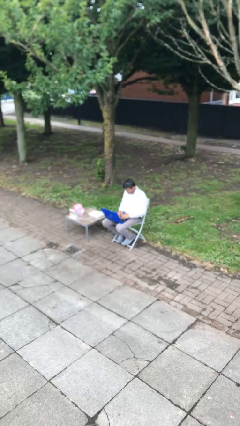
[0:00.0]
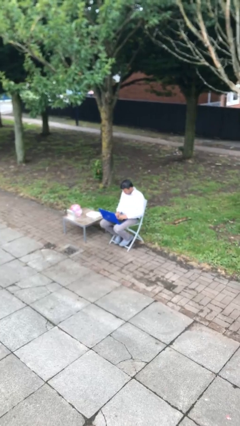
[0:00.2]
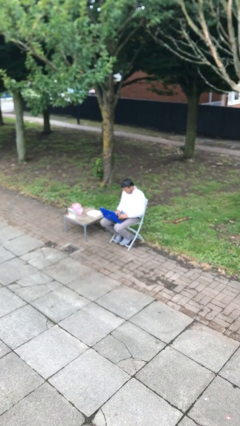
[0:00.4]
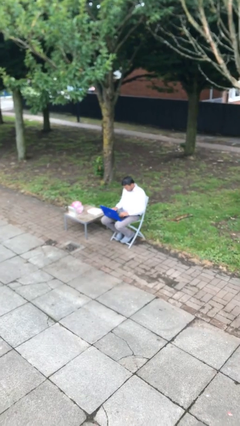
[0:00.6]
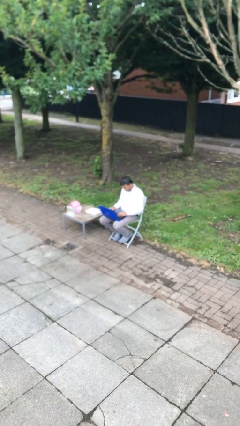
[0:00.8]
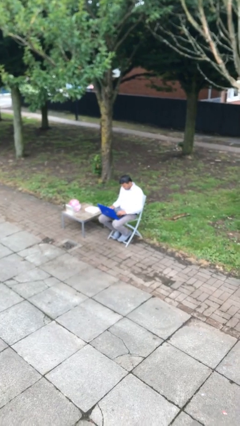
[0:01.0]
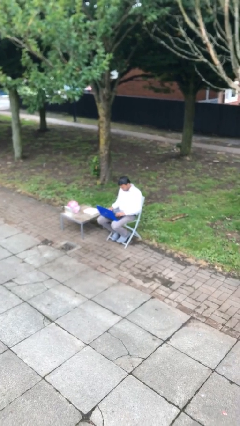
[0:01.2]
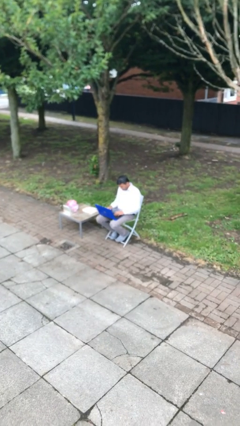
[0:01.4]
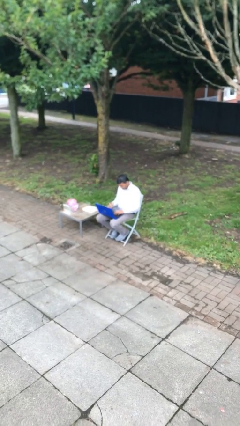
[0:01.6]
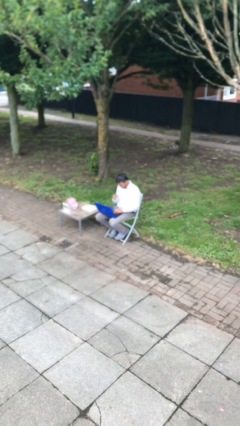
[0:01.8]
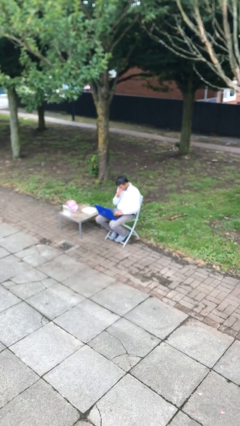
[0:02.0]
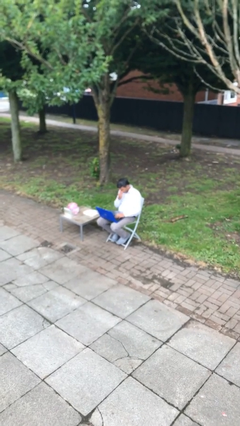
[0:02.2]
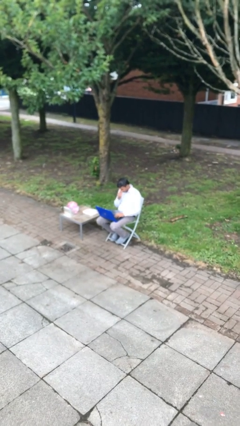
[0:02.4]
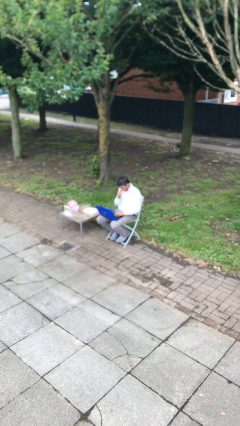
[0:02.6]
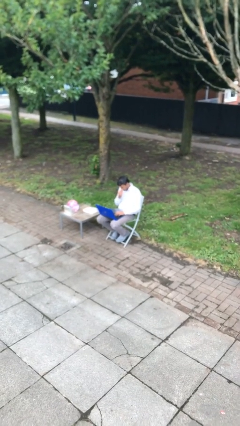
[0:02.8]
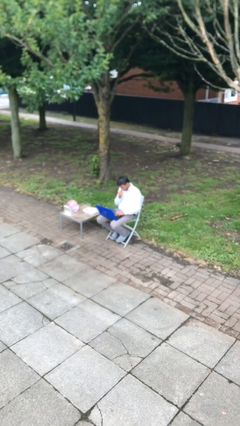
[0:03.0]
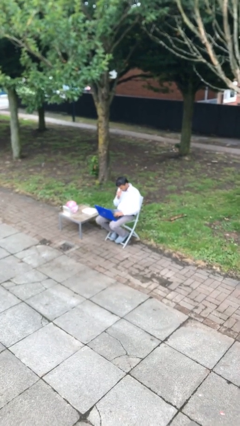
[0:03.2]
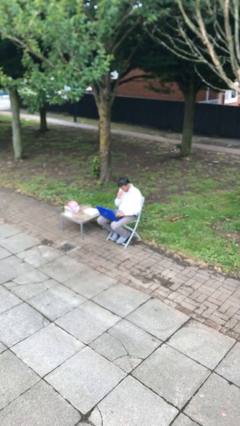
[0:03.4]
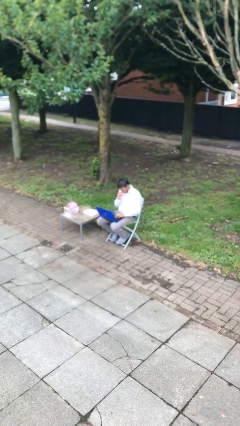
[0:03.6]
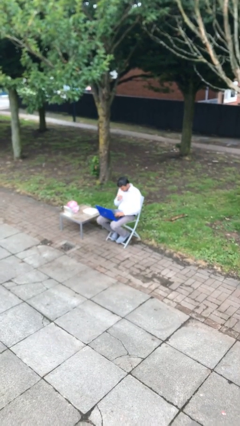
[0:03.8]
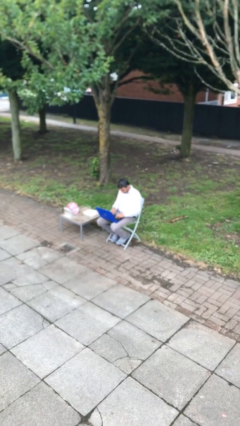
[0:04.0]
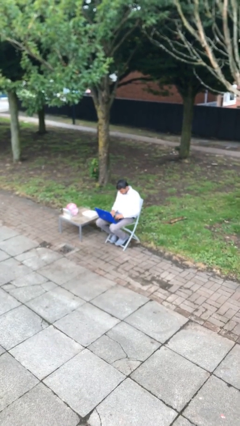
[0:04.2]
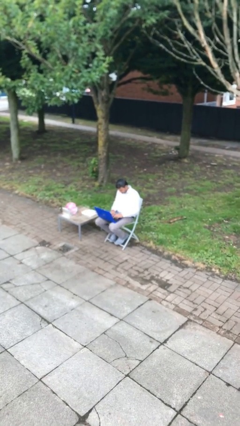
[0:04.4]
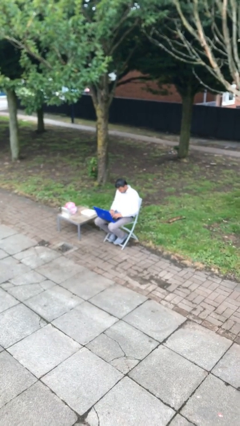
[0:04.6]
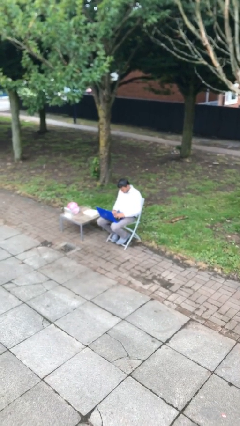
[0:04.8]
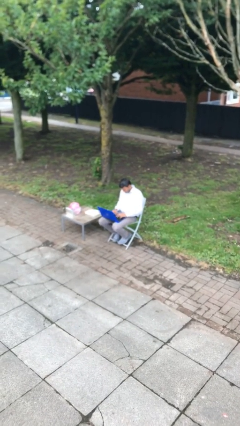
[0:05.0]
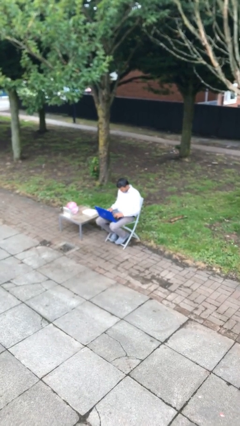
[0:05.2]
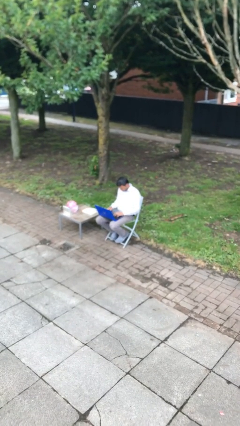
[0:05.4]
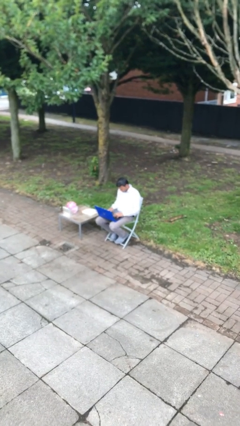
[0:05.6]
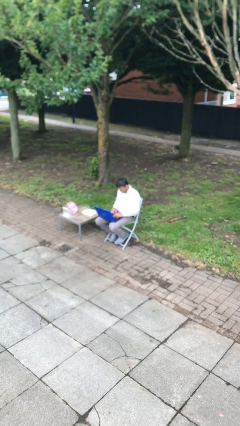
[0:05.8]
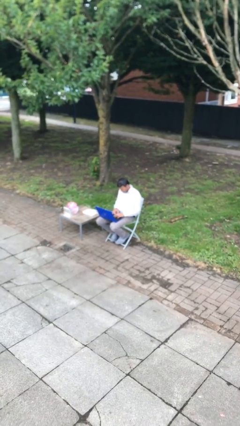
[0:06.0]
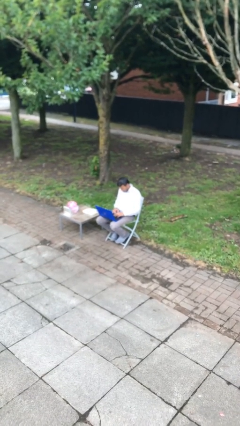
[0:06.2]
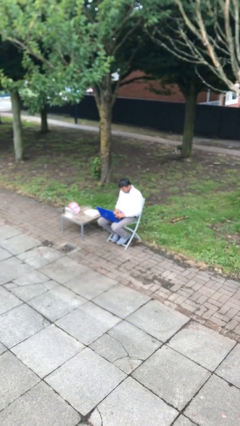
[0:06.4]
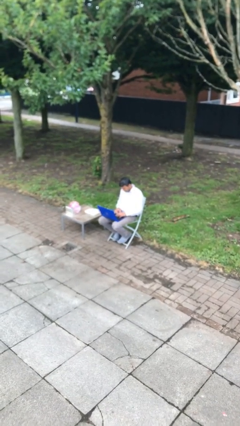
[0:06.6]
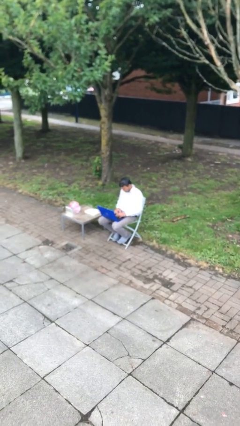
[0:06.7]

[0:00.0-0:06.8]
person interacts with laptop

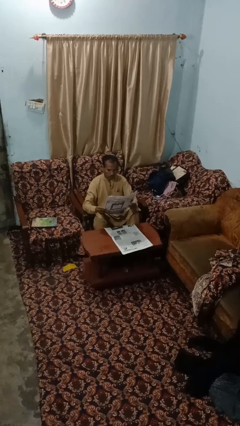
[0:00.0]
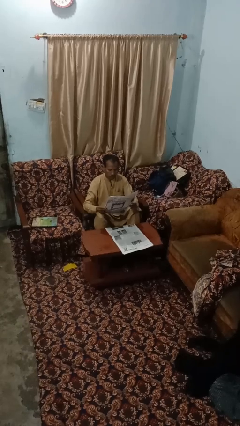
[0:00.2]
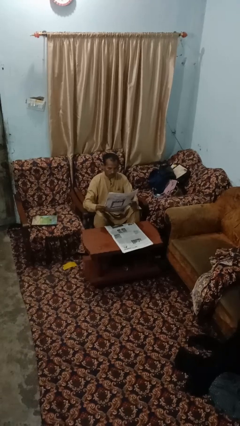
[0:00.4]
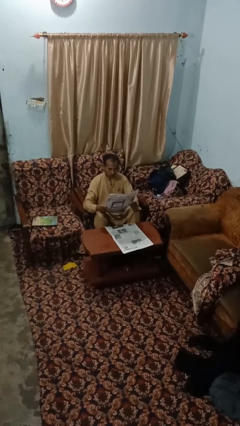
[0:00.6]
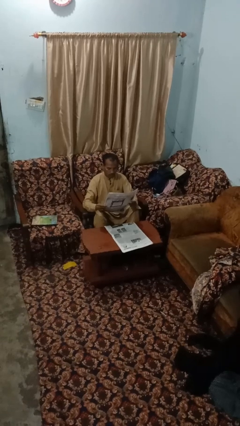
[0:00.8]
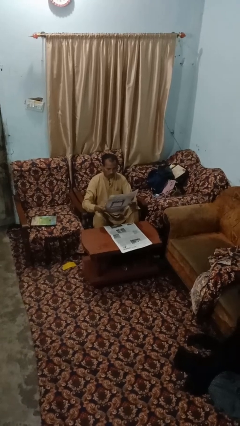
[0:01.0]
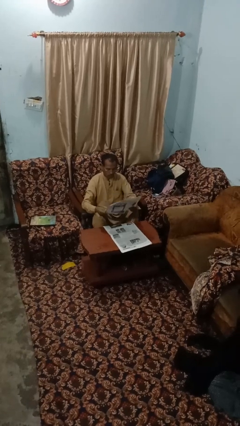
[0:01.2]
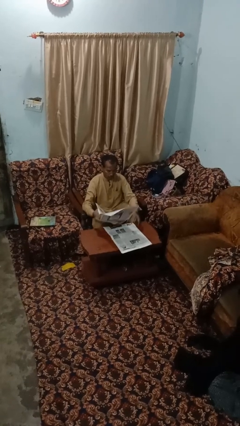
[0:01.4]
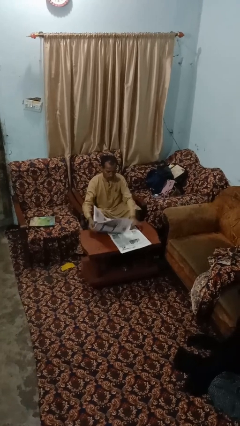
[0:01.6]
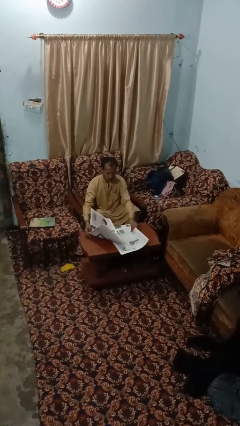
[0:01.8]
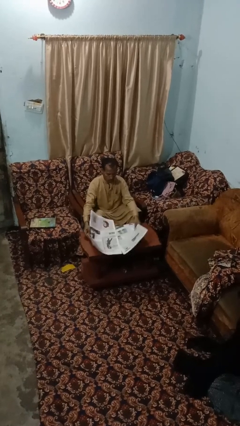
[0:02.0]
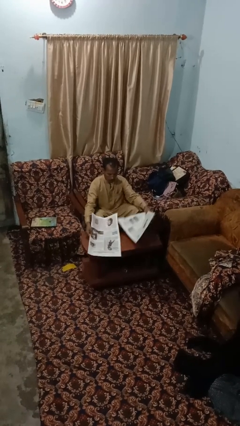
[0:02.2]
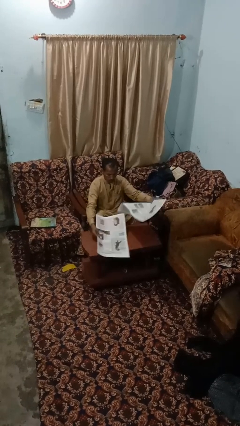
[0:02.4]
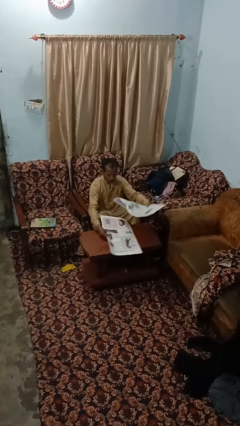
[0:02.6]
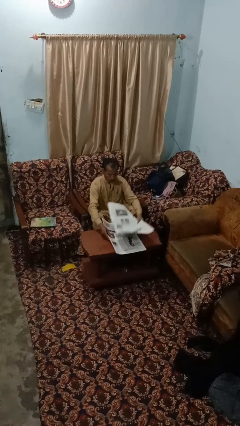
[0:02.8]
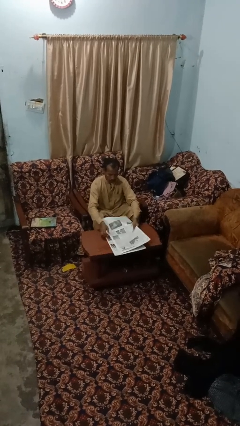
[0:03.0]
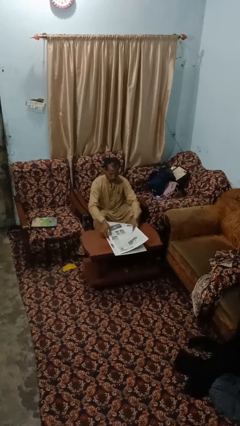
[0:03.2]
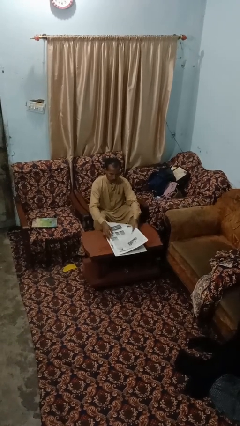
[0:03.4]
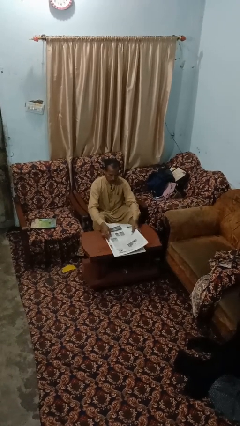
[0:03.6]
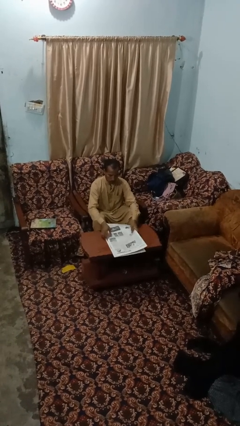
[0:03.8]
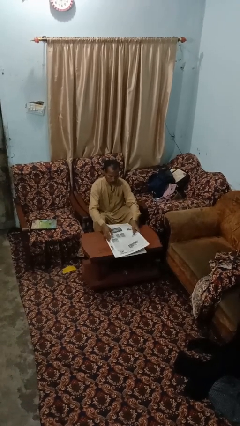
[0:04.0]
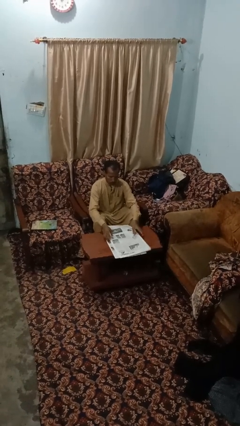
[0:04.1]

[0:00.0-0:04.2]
person reads newspaper

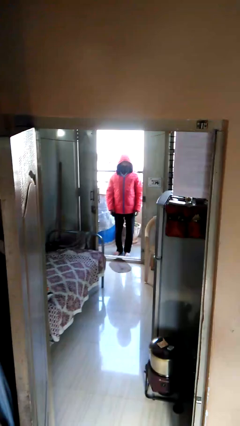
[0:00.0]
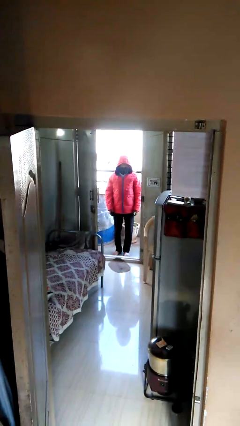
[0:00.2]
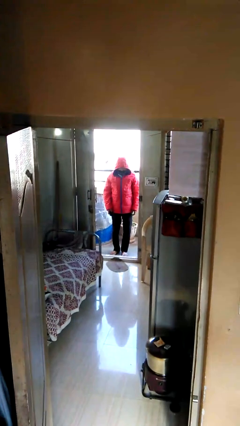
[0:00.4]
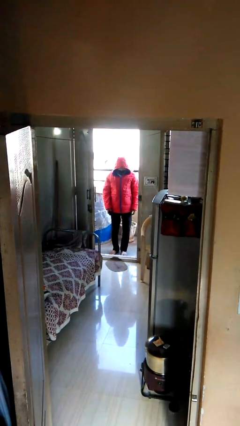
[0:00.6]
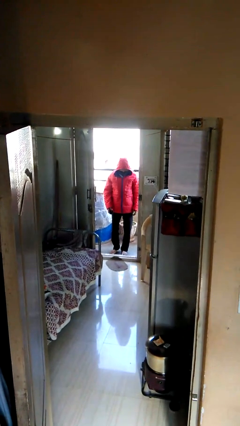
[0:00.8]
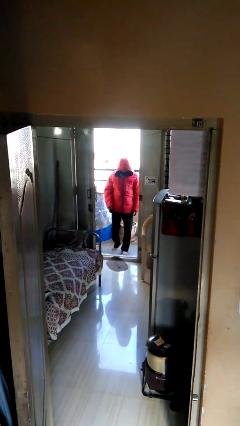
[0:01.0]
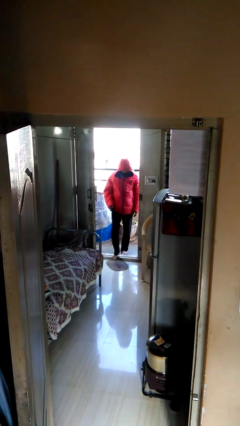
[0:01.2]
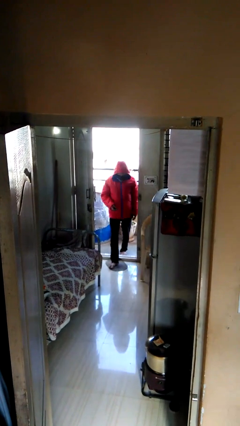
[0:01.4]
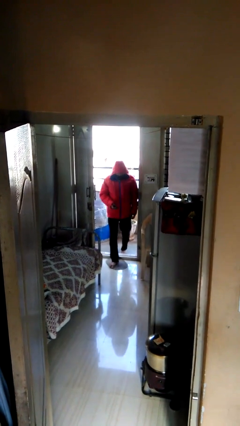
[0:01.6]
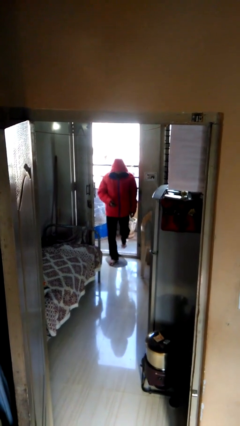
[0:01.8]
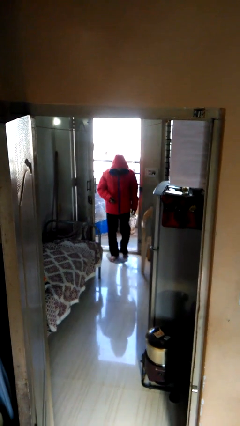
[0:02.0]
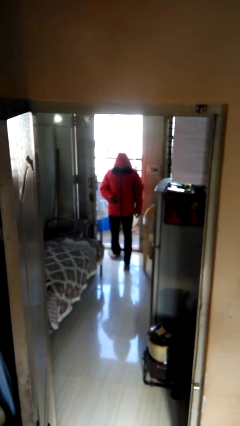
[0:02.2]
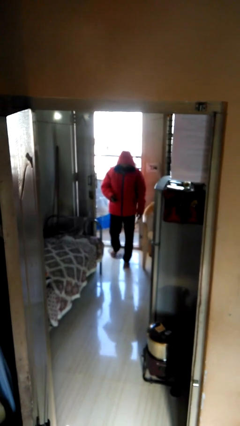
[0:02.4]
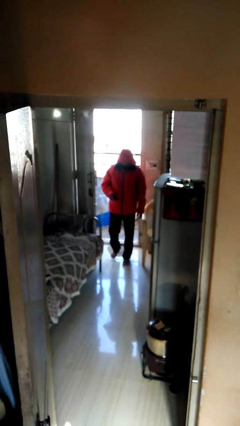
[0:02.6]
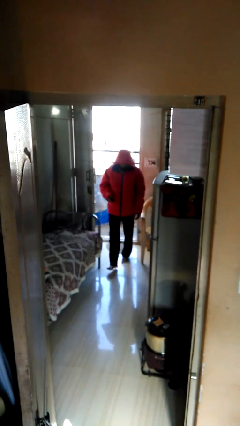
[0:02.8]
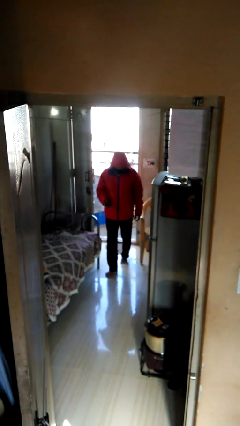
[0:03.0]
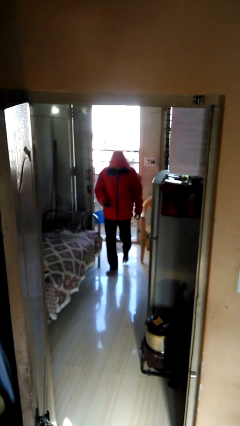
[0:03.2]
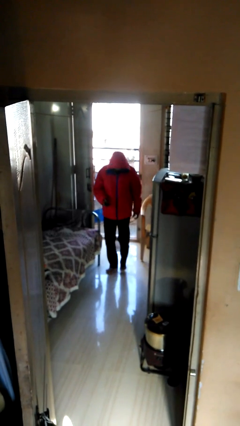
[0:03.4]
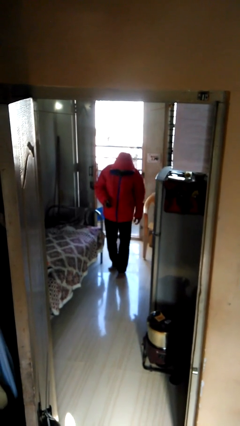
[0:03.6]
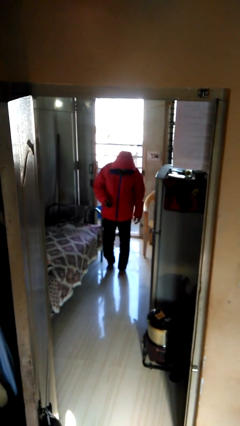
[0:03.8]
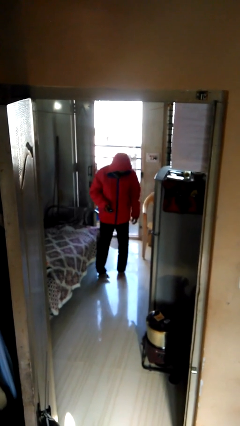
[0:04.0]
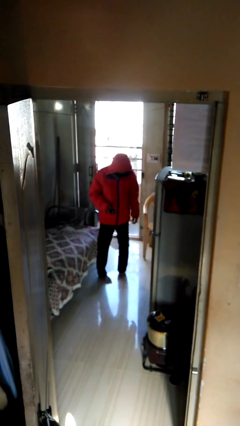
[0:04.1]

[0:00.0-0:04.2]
person enters scene through structure

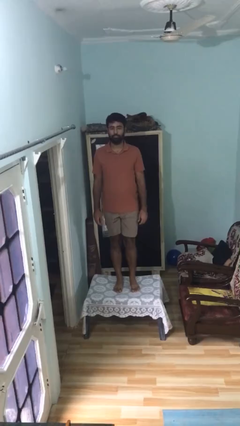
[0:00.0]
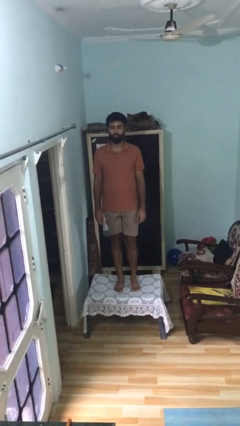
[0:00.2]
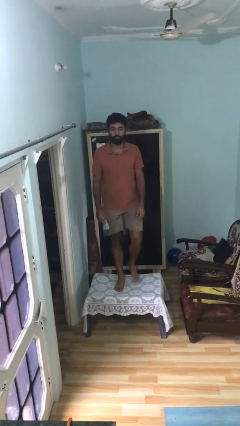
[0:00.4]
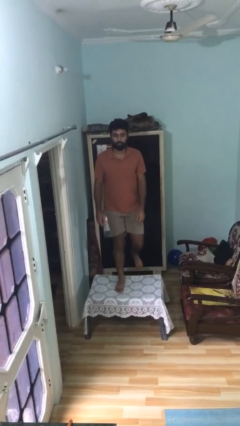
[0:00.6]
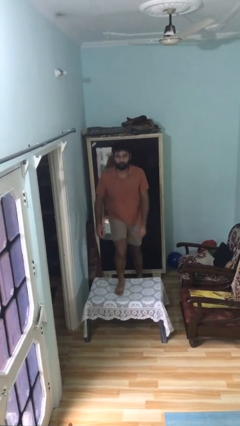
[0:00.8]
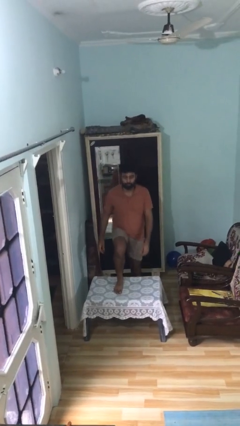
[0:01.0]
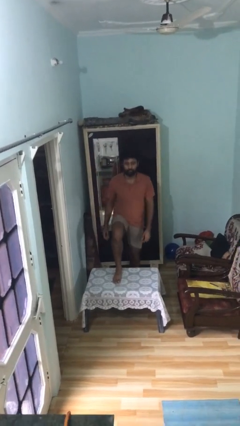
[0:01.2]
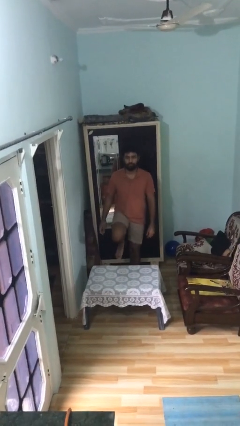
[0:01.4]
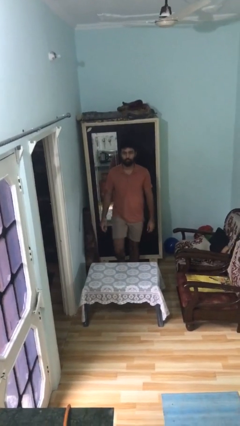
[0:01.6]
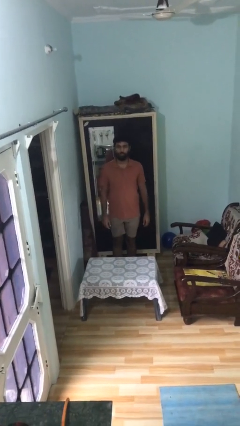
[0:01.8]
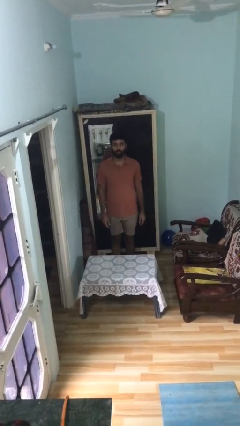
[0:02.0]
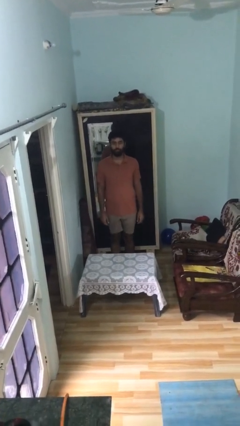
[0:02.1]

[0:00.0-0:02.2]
person climbs off table
